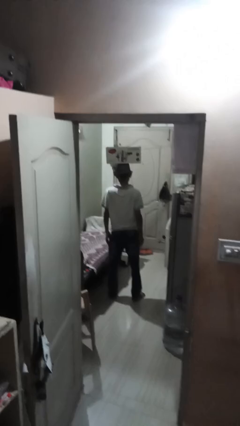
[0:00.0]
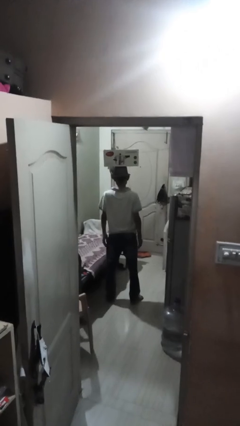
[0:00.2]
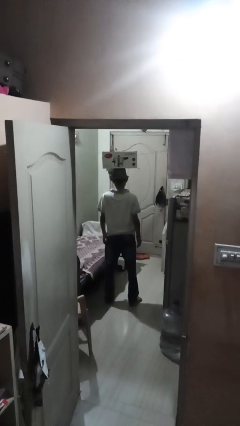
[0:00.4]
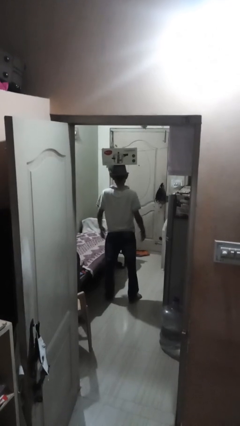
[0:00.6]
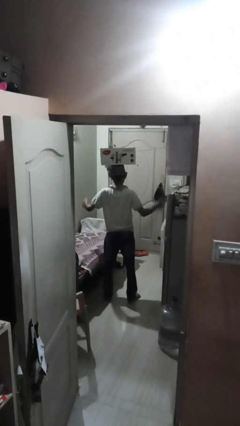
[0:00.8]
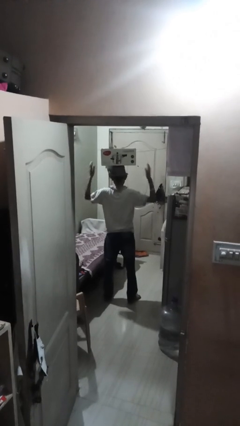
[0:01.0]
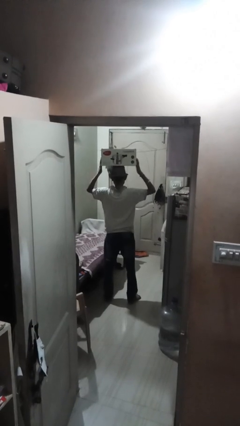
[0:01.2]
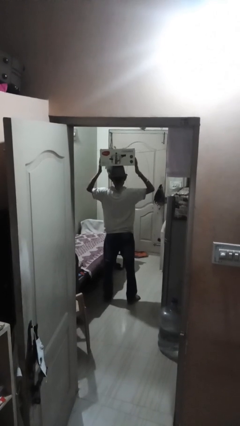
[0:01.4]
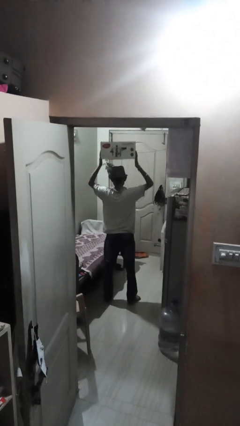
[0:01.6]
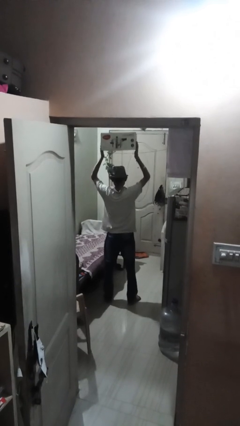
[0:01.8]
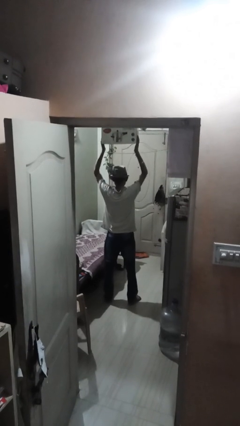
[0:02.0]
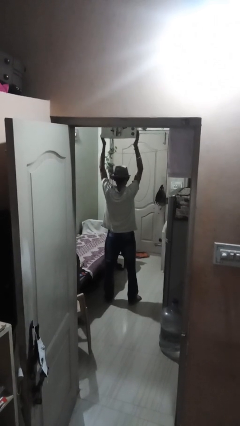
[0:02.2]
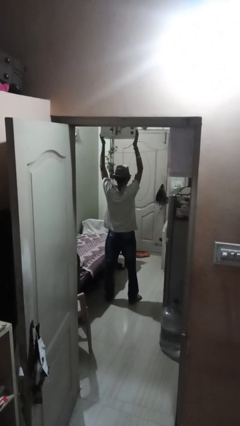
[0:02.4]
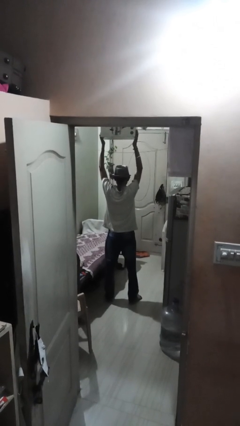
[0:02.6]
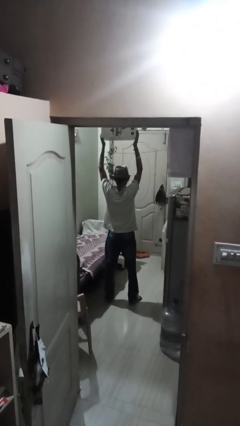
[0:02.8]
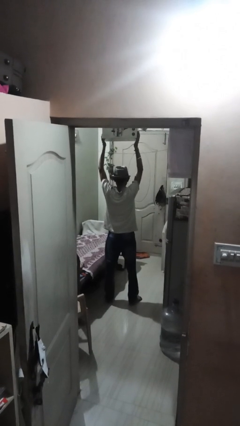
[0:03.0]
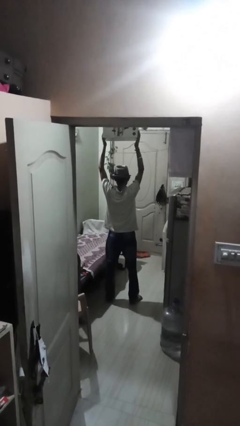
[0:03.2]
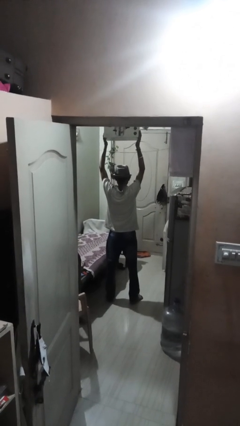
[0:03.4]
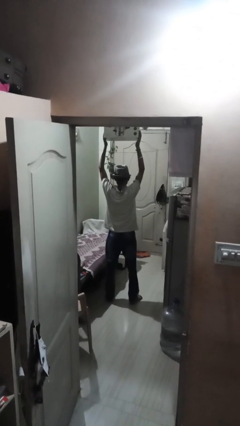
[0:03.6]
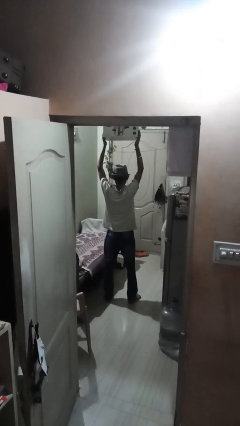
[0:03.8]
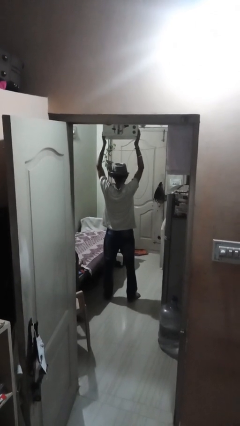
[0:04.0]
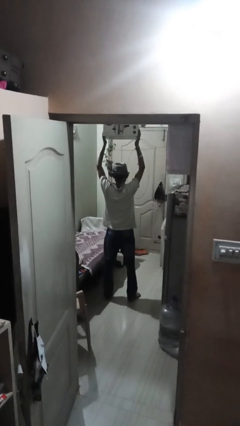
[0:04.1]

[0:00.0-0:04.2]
person holds object above head

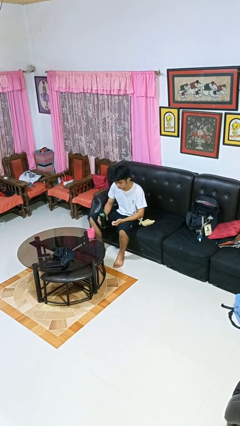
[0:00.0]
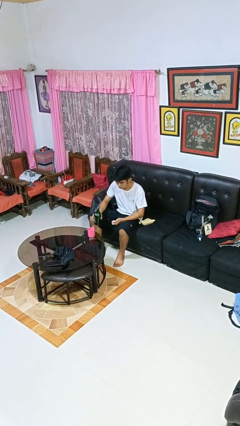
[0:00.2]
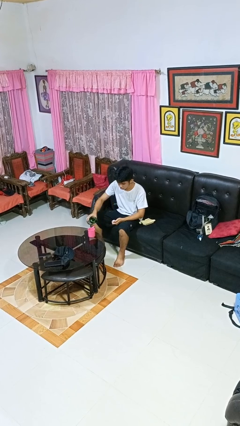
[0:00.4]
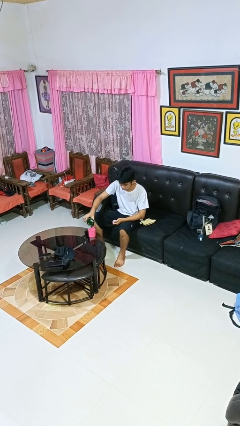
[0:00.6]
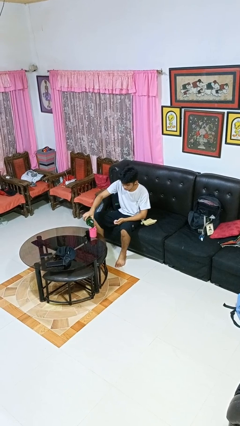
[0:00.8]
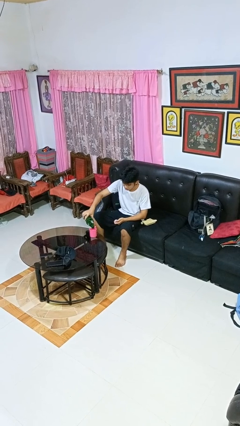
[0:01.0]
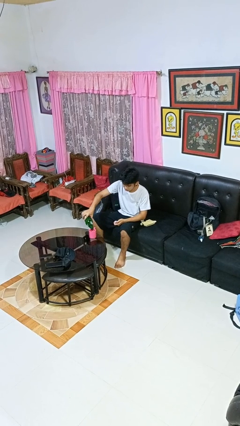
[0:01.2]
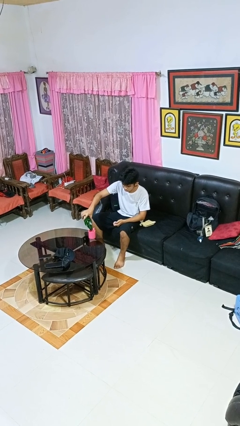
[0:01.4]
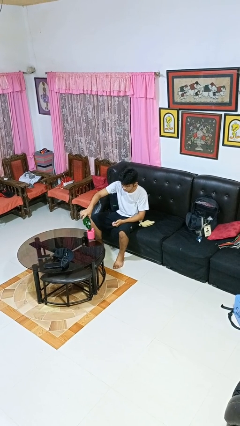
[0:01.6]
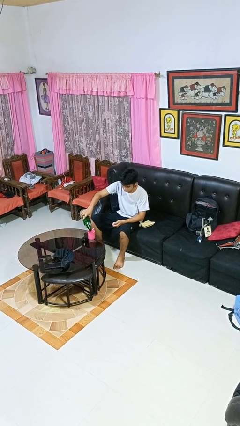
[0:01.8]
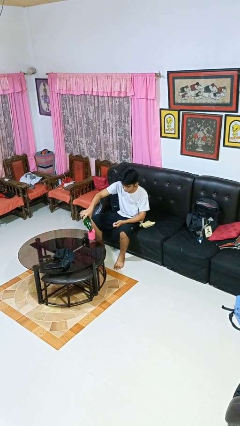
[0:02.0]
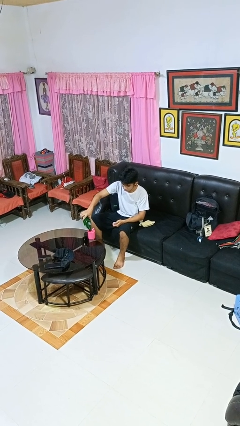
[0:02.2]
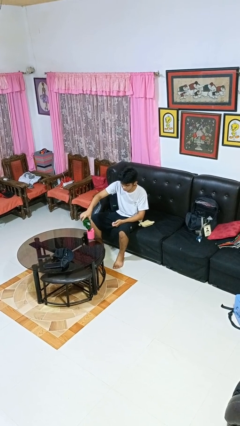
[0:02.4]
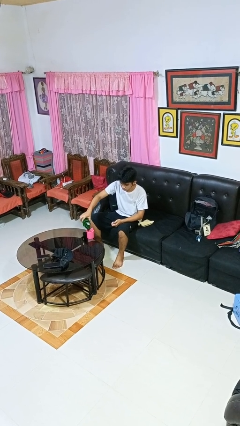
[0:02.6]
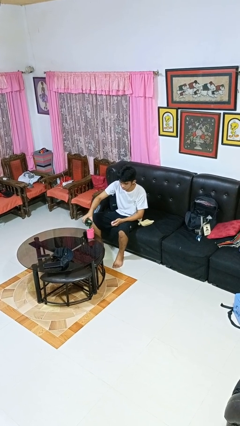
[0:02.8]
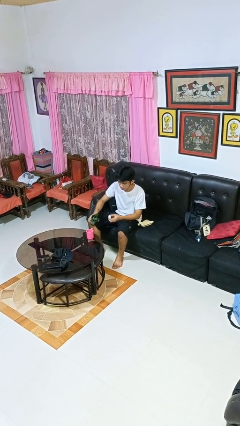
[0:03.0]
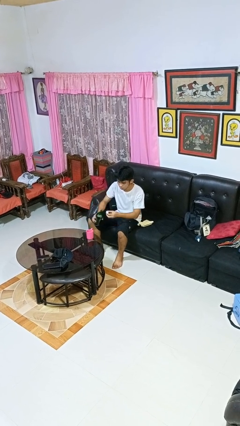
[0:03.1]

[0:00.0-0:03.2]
person pours liquid into cup

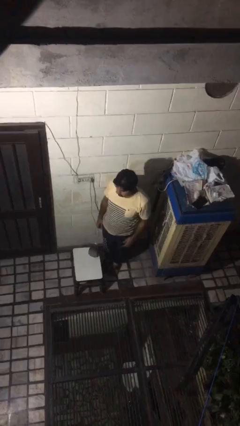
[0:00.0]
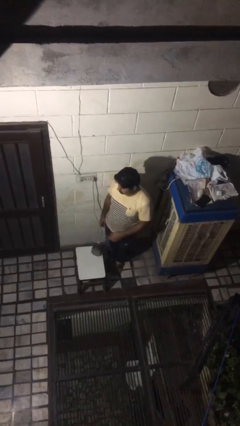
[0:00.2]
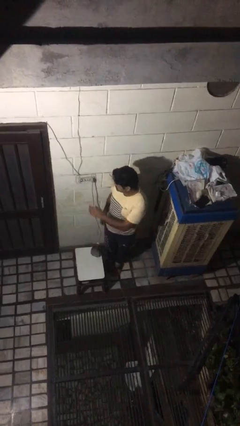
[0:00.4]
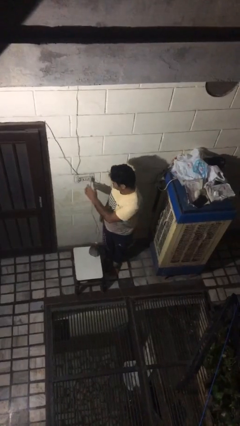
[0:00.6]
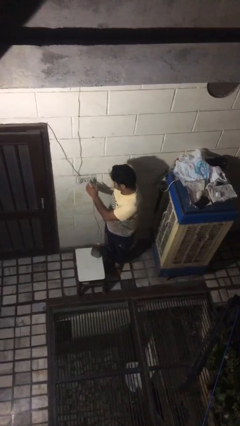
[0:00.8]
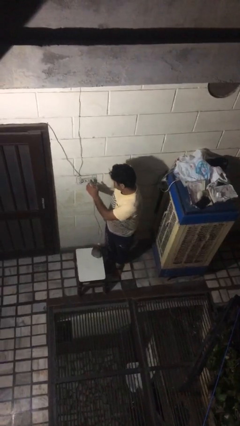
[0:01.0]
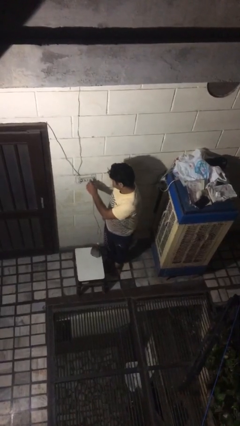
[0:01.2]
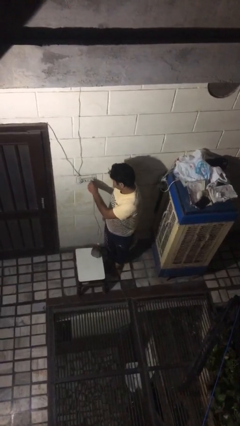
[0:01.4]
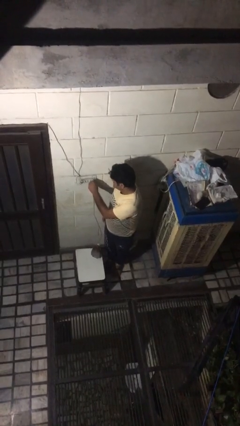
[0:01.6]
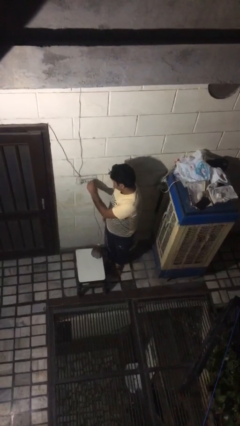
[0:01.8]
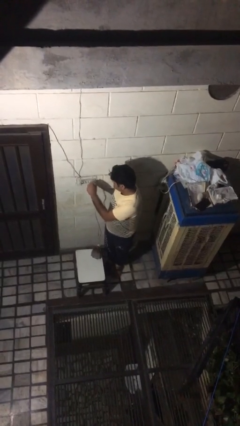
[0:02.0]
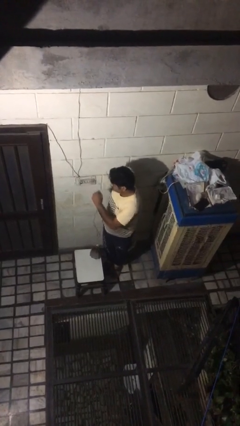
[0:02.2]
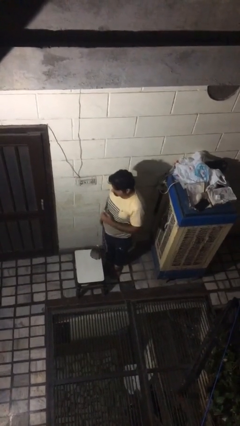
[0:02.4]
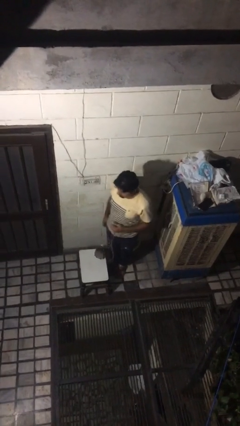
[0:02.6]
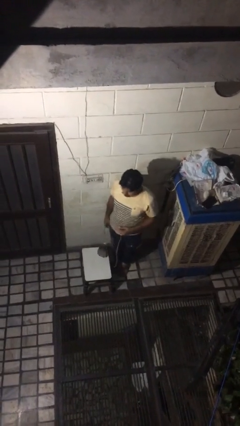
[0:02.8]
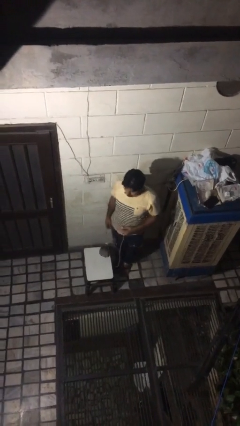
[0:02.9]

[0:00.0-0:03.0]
person unplugs from electrical socket

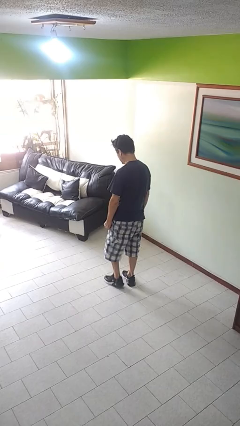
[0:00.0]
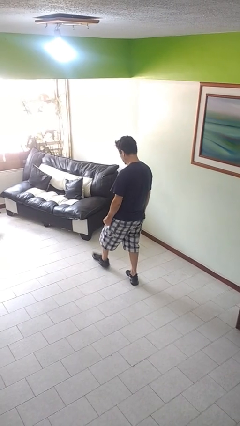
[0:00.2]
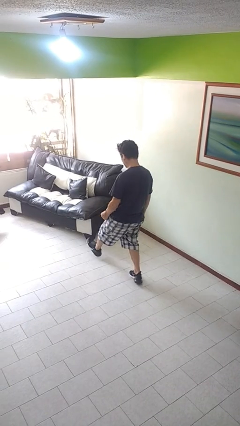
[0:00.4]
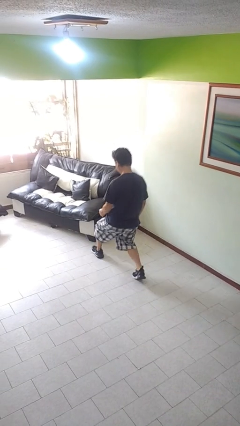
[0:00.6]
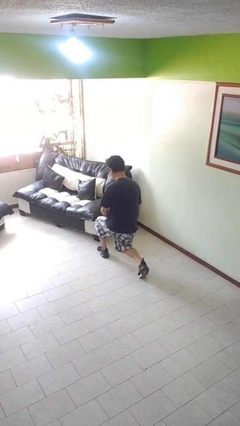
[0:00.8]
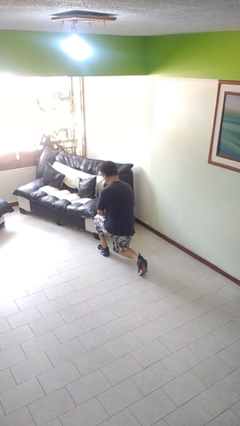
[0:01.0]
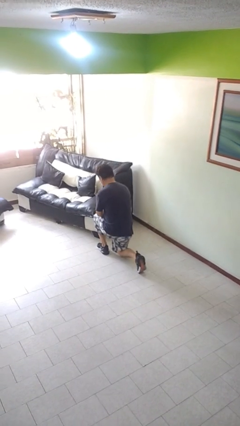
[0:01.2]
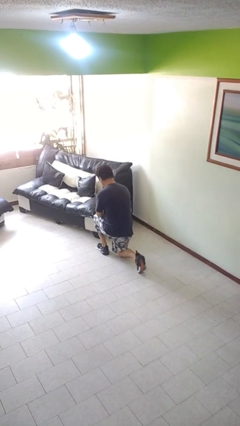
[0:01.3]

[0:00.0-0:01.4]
person kneels

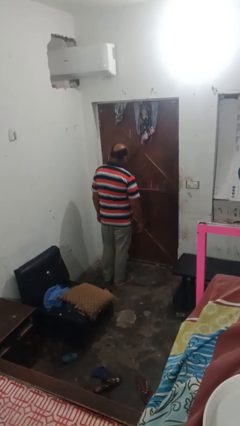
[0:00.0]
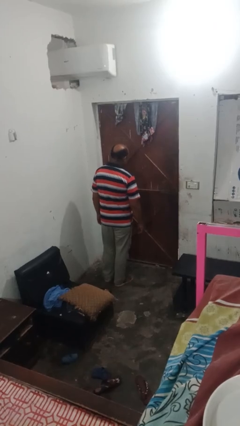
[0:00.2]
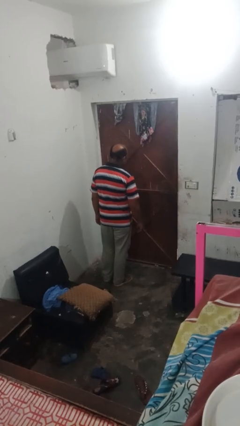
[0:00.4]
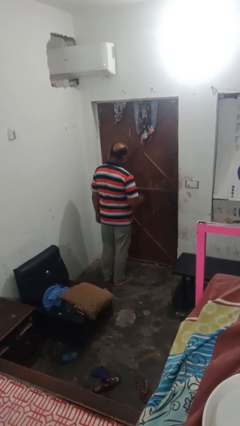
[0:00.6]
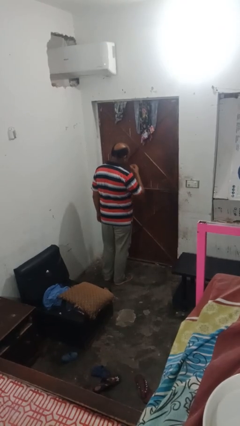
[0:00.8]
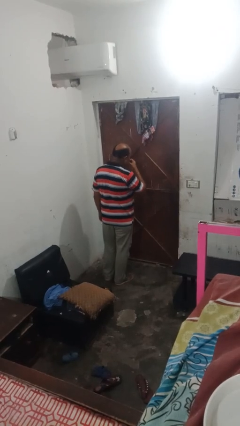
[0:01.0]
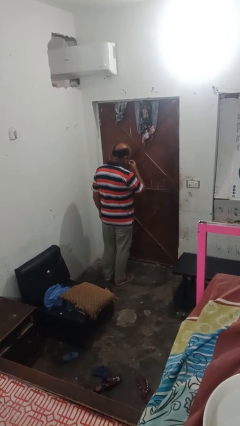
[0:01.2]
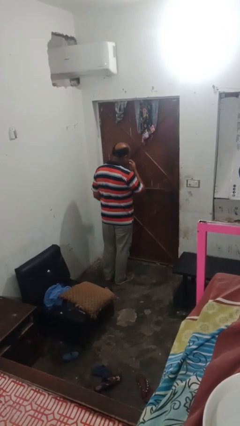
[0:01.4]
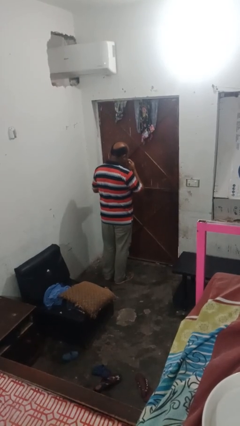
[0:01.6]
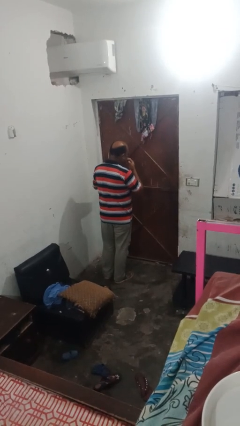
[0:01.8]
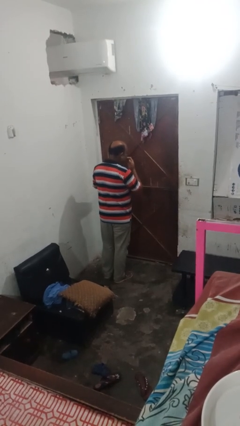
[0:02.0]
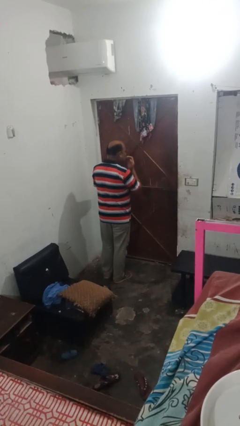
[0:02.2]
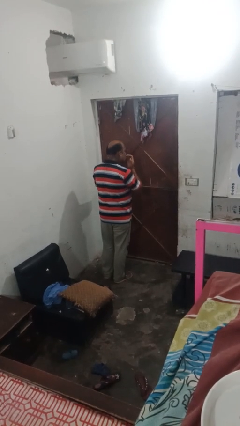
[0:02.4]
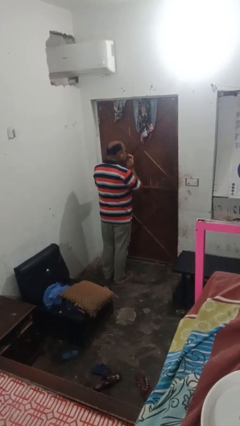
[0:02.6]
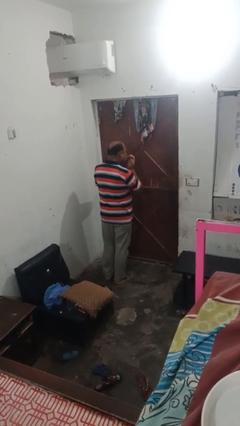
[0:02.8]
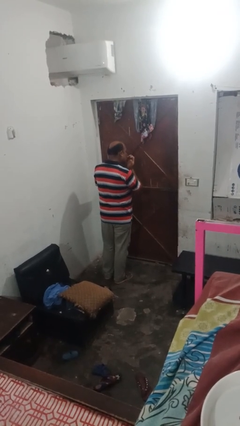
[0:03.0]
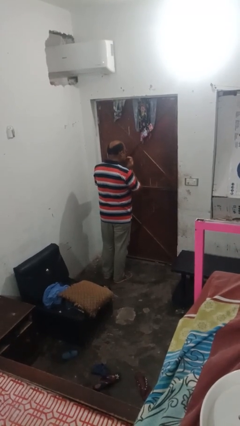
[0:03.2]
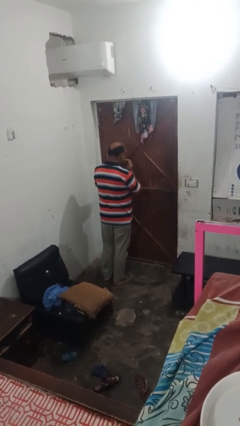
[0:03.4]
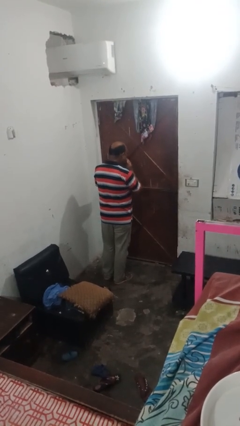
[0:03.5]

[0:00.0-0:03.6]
person licks fingers

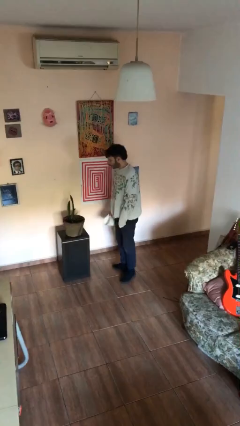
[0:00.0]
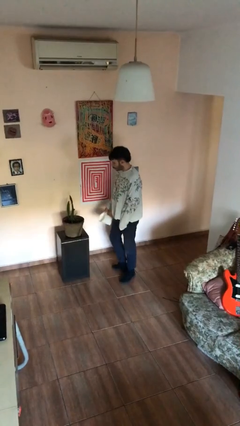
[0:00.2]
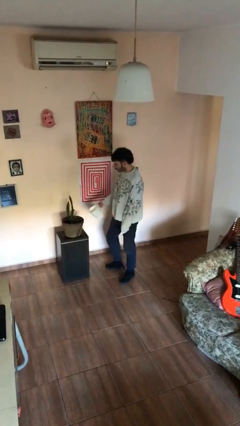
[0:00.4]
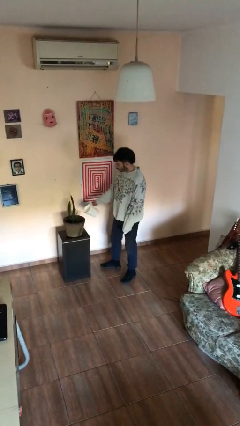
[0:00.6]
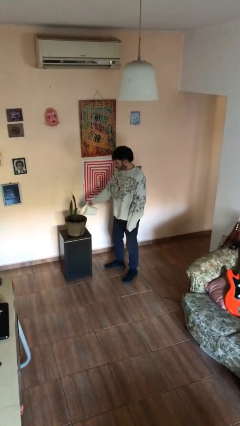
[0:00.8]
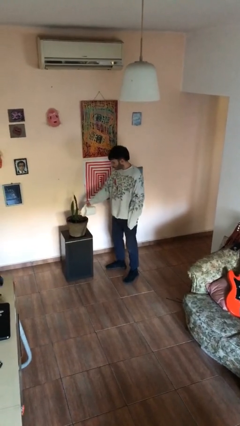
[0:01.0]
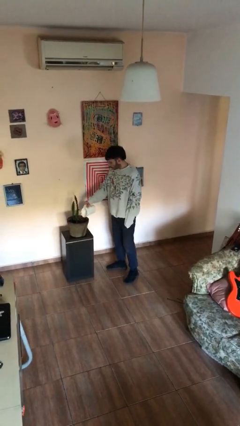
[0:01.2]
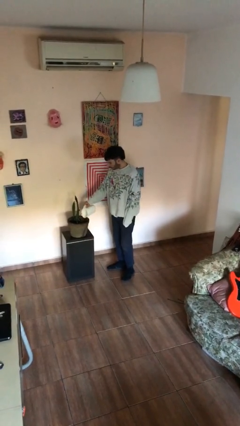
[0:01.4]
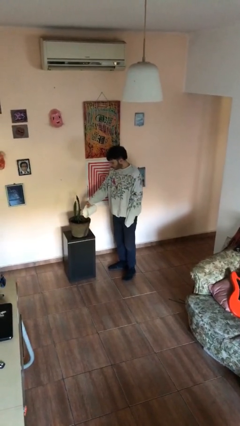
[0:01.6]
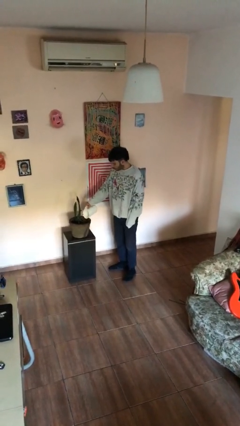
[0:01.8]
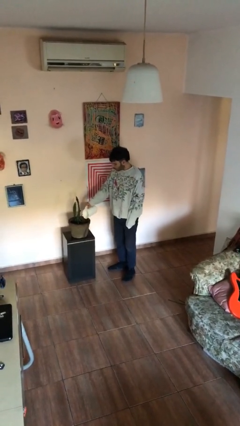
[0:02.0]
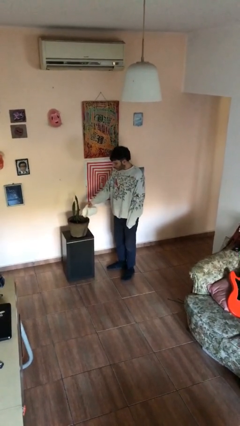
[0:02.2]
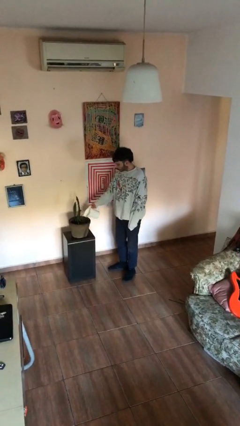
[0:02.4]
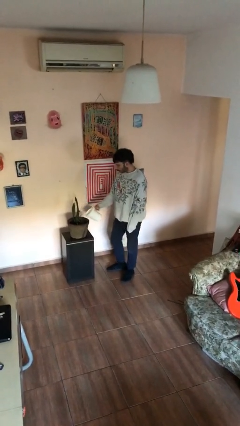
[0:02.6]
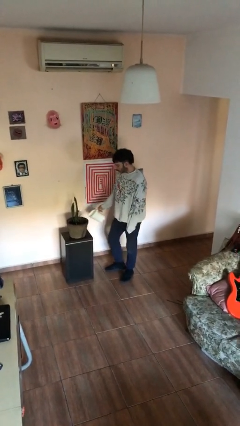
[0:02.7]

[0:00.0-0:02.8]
person waters houseplant
